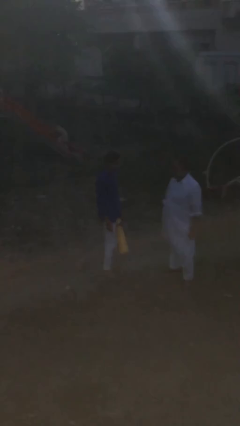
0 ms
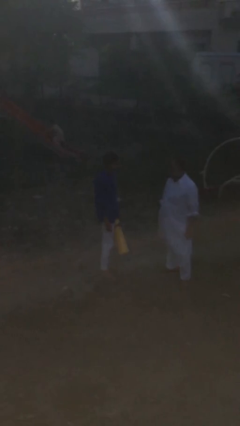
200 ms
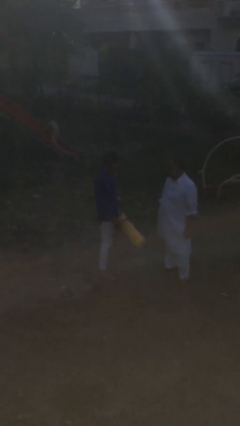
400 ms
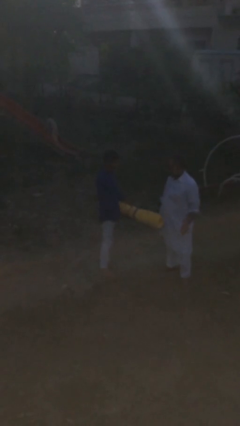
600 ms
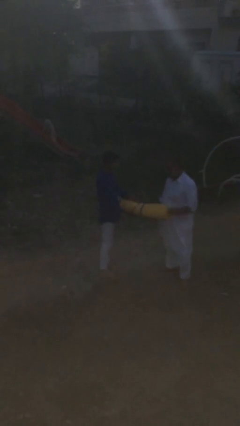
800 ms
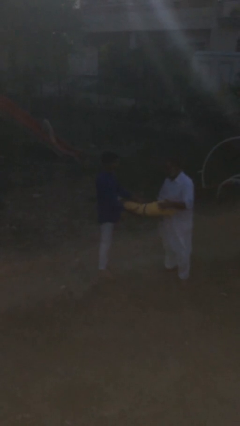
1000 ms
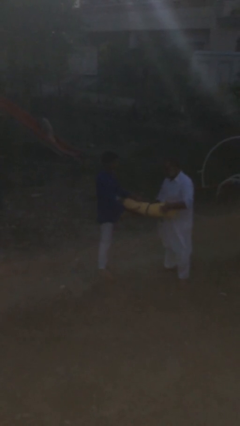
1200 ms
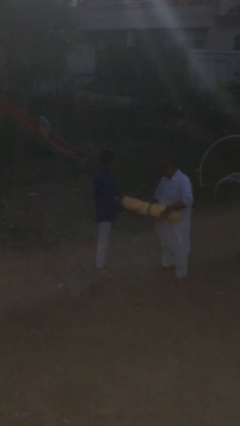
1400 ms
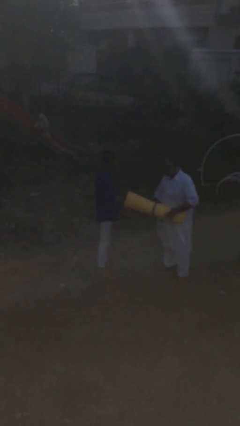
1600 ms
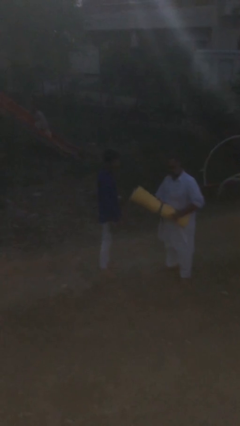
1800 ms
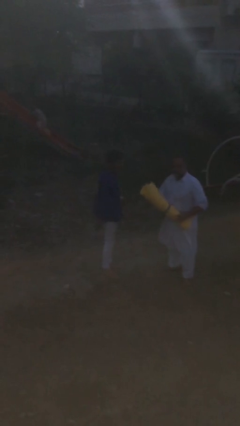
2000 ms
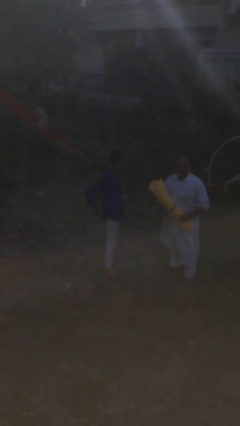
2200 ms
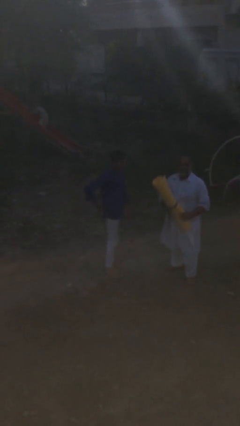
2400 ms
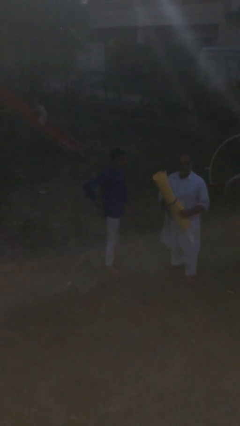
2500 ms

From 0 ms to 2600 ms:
person transfers object to person

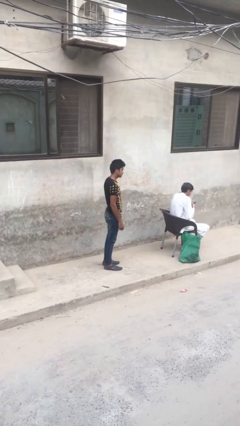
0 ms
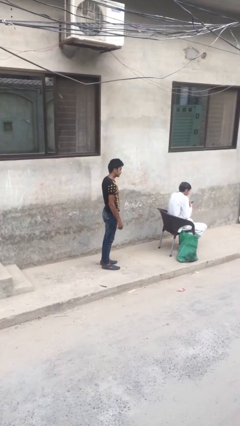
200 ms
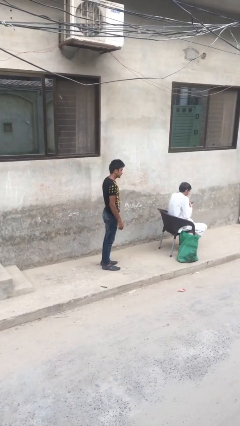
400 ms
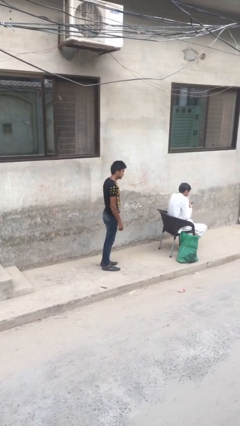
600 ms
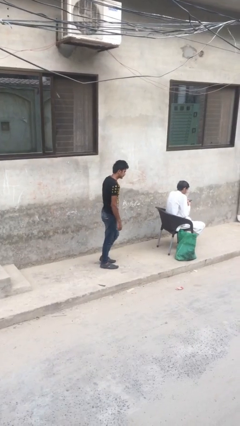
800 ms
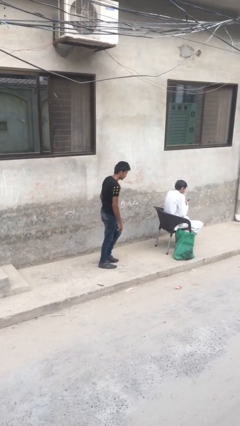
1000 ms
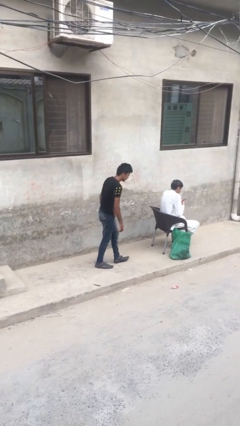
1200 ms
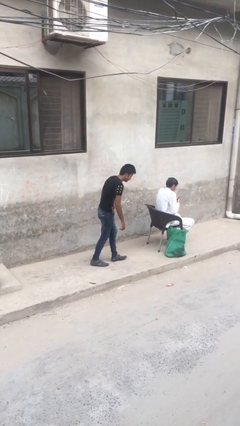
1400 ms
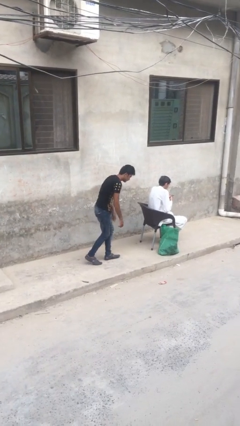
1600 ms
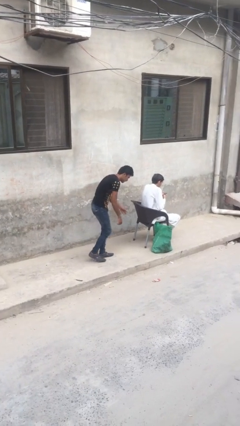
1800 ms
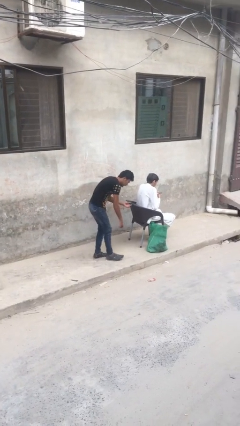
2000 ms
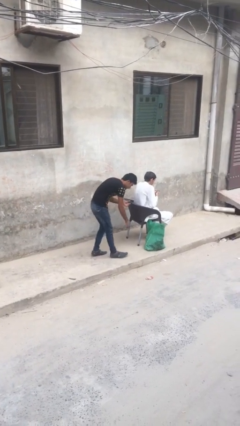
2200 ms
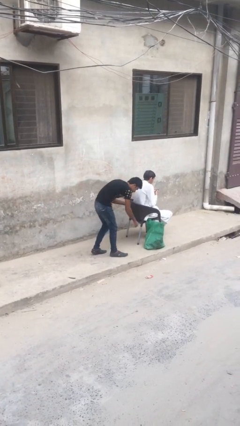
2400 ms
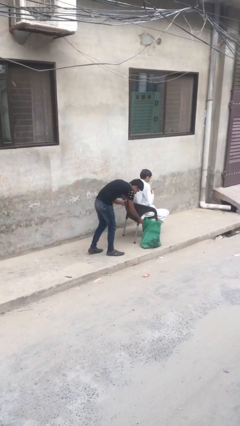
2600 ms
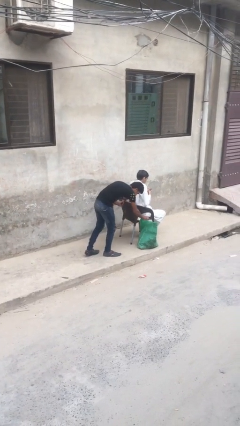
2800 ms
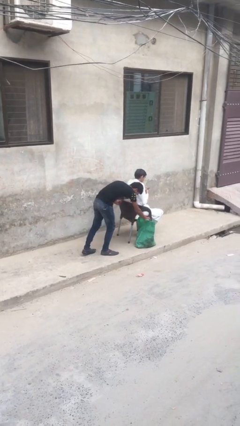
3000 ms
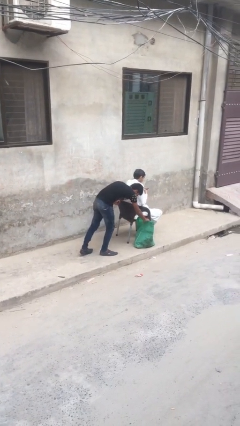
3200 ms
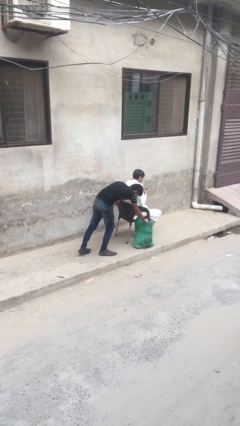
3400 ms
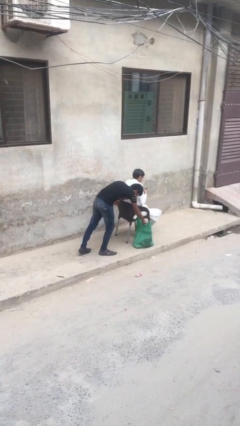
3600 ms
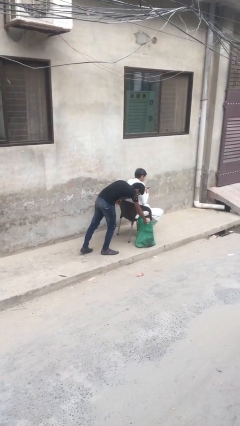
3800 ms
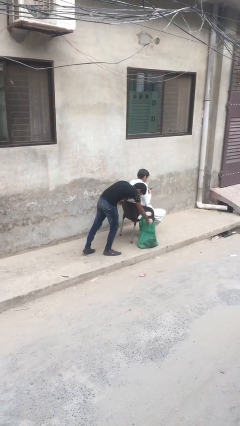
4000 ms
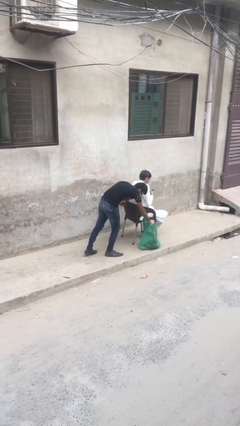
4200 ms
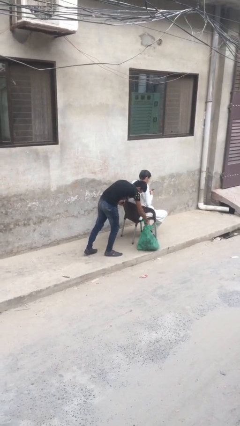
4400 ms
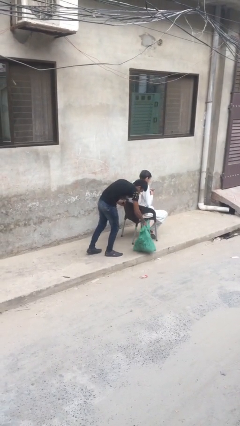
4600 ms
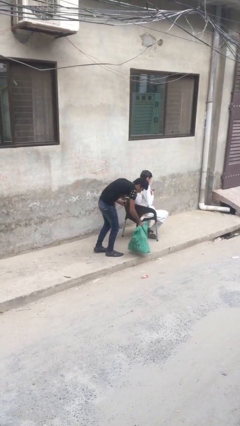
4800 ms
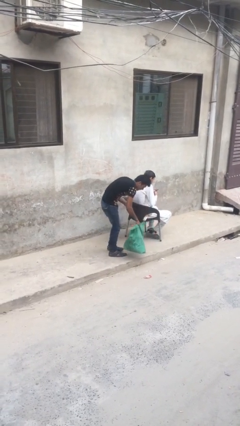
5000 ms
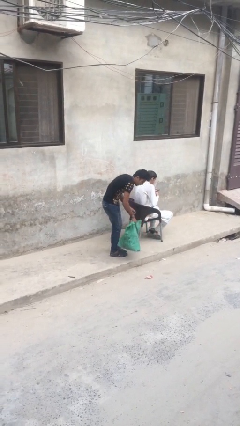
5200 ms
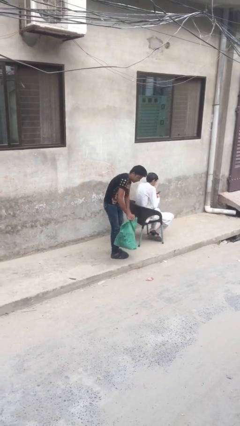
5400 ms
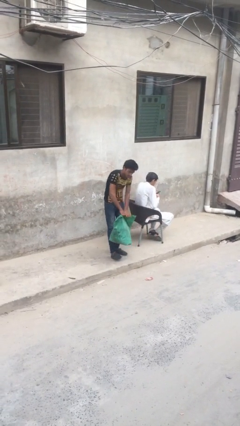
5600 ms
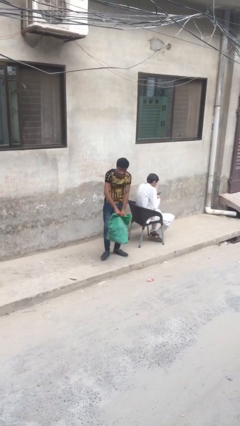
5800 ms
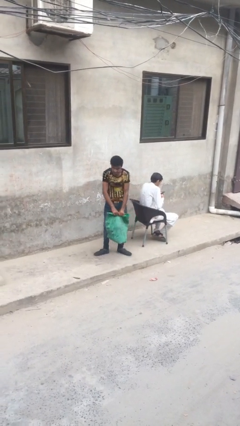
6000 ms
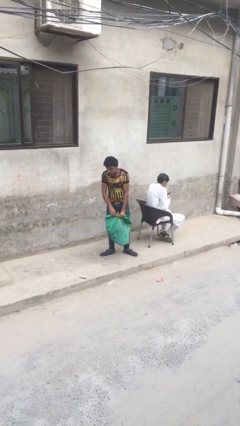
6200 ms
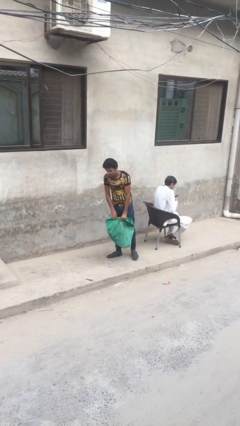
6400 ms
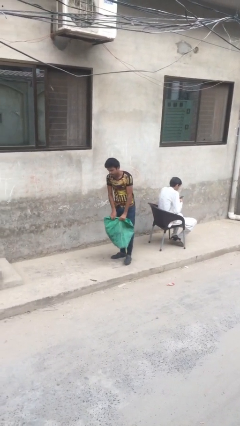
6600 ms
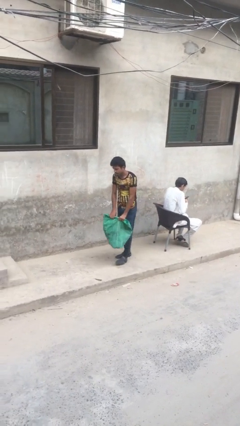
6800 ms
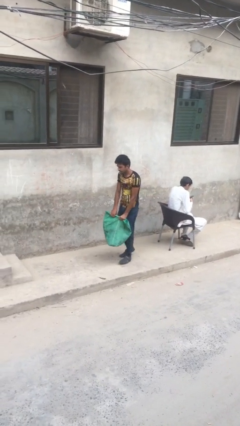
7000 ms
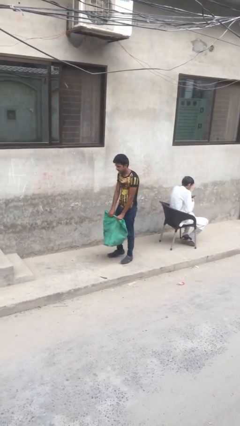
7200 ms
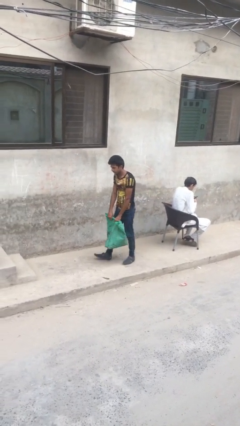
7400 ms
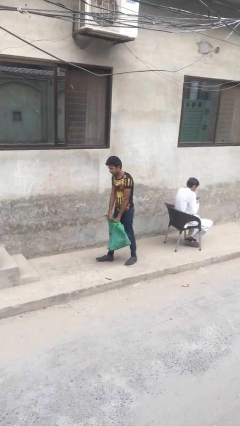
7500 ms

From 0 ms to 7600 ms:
person steals object from person

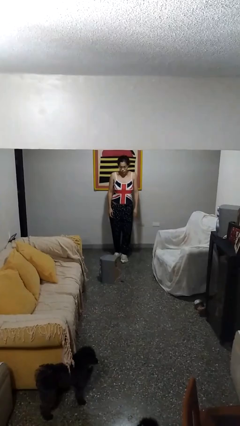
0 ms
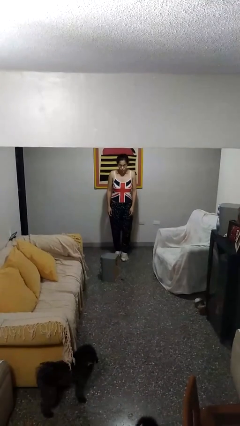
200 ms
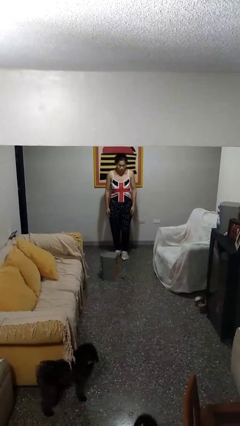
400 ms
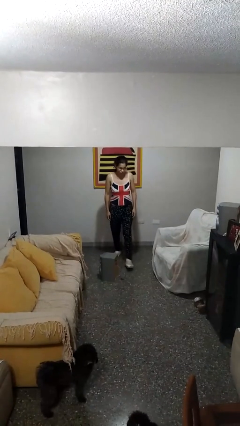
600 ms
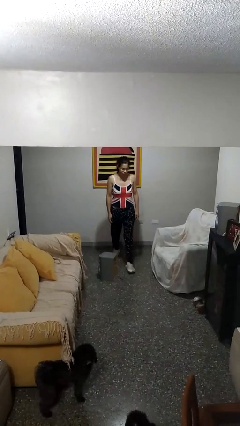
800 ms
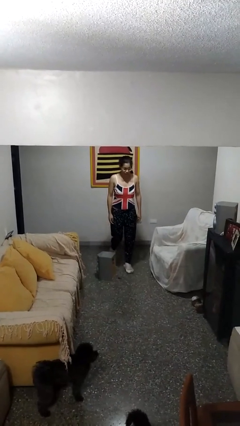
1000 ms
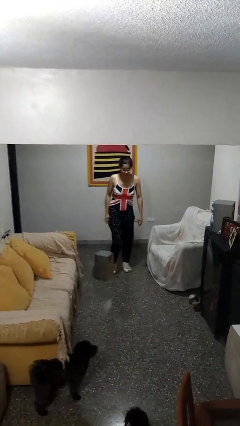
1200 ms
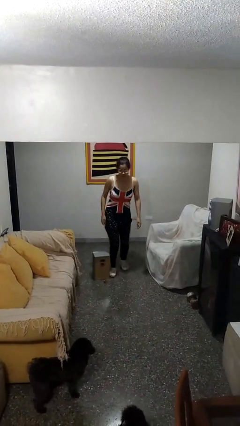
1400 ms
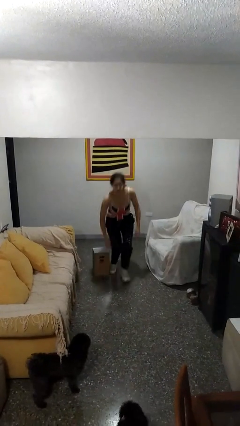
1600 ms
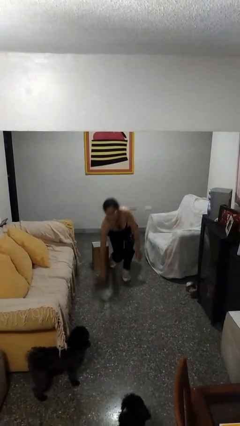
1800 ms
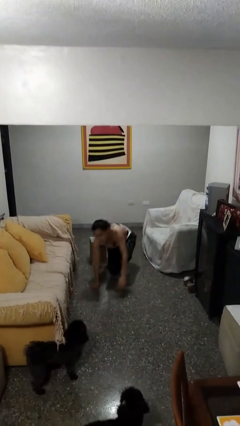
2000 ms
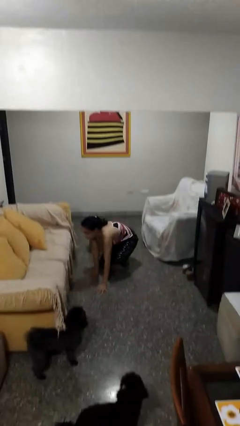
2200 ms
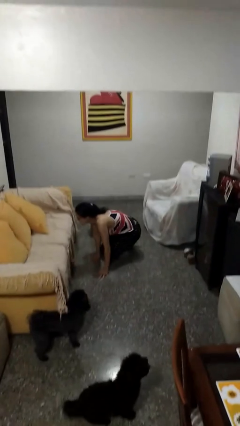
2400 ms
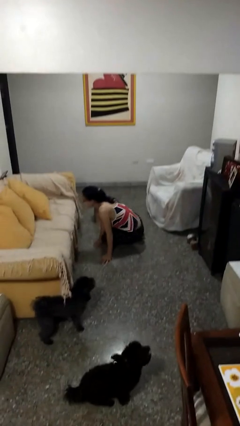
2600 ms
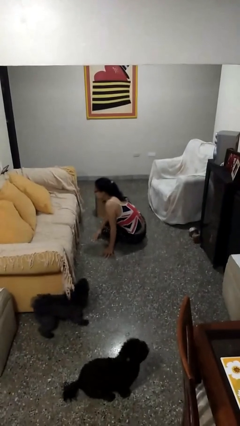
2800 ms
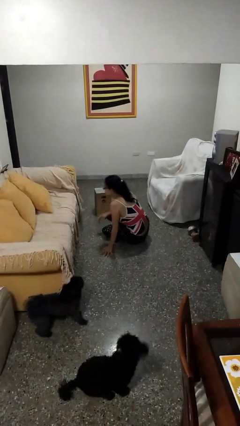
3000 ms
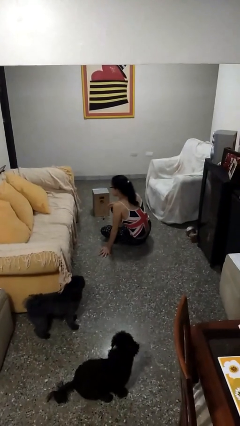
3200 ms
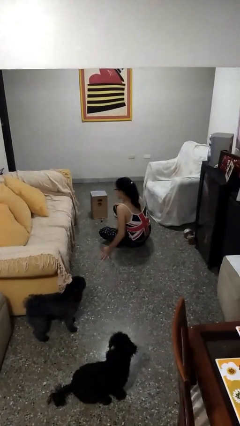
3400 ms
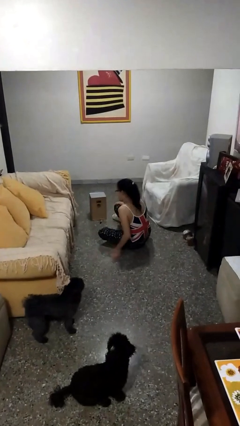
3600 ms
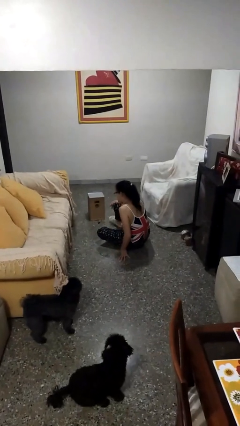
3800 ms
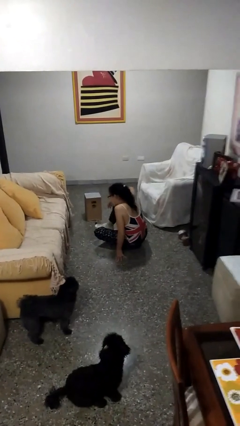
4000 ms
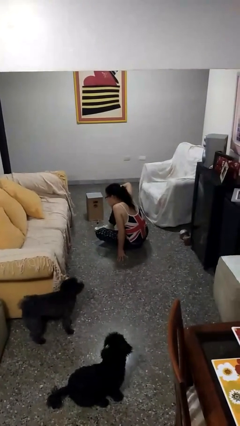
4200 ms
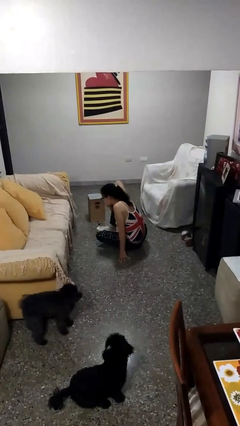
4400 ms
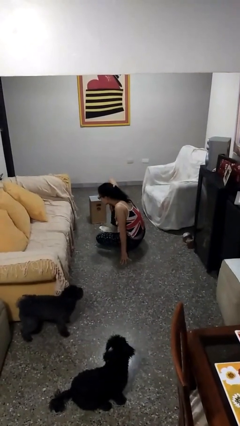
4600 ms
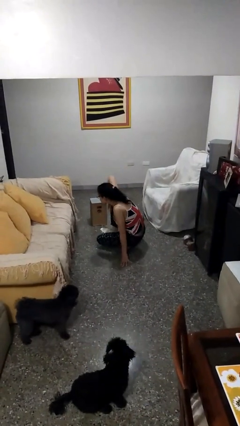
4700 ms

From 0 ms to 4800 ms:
person trips on object on floor

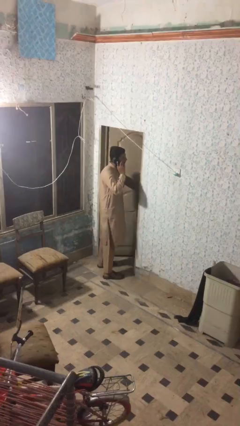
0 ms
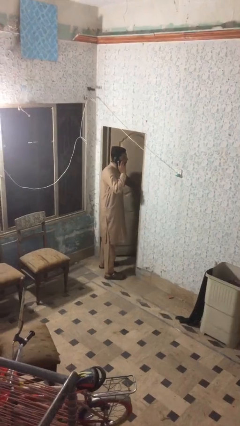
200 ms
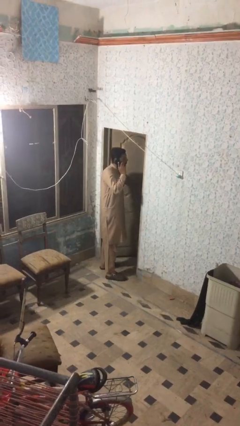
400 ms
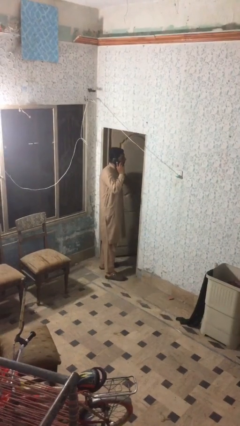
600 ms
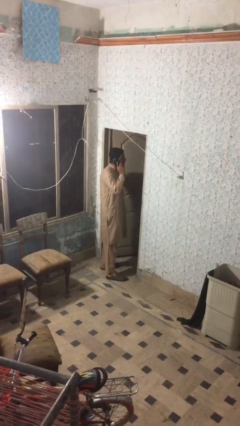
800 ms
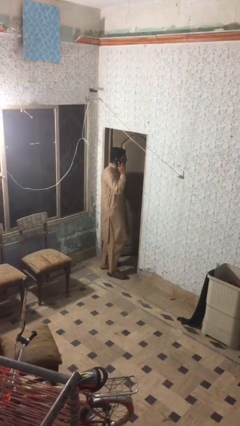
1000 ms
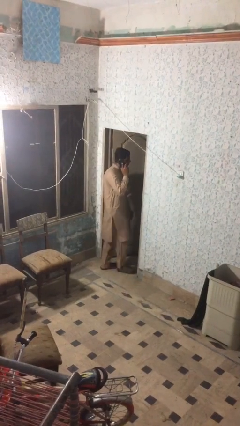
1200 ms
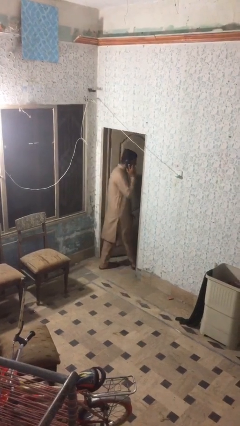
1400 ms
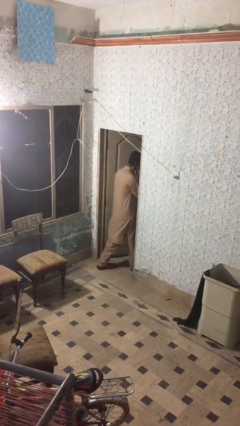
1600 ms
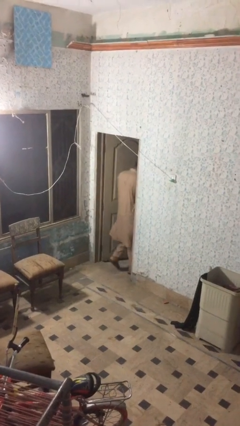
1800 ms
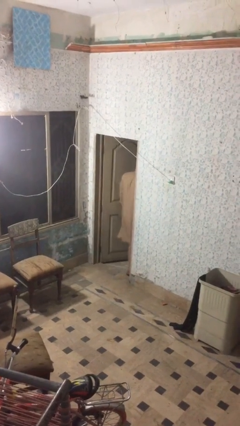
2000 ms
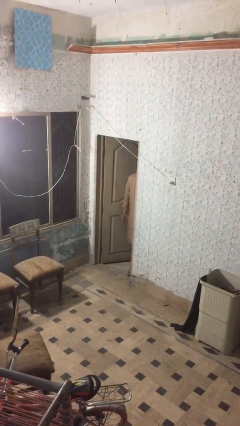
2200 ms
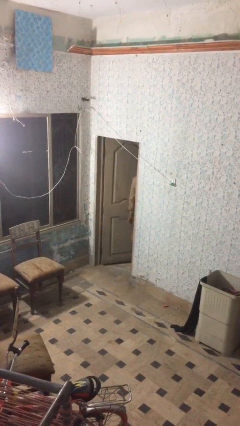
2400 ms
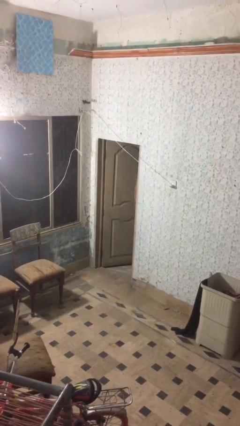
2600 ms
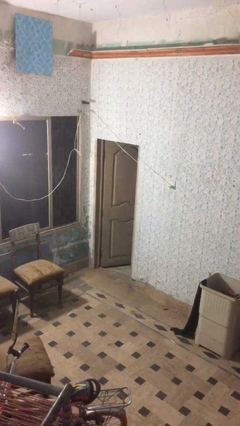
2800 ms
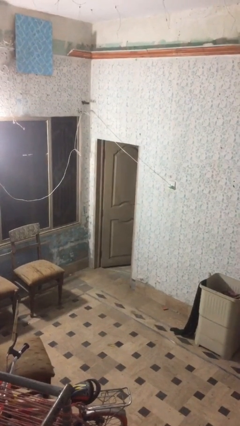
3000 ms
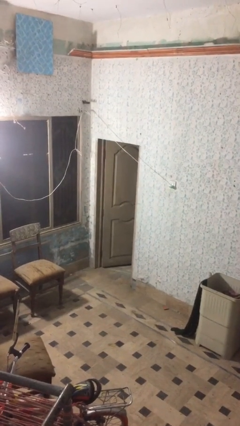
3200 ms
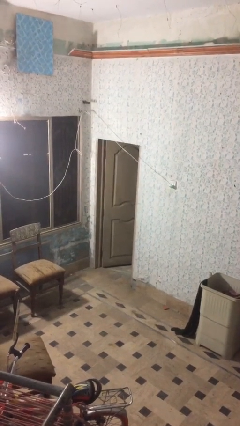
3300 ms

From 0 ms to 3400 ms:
person exits scene through structure
